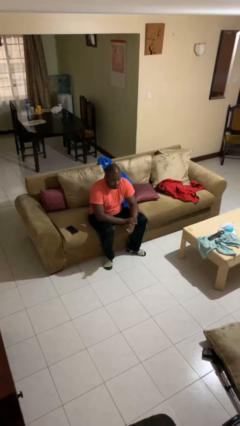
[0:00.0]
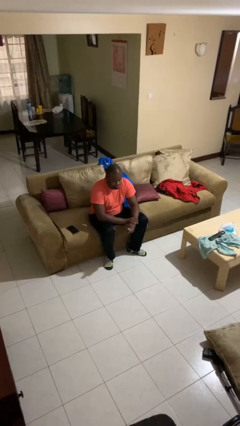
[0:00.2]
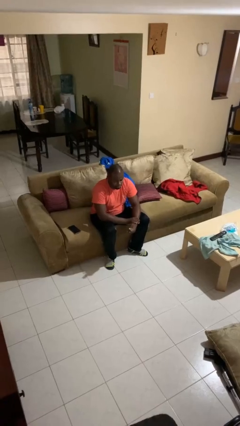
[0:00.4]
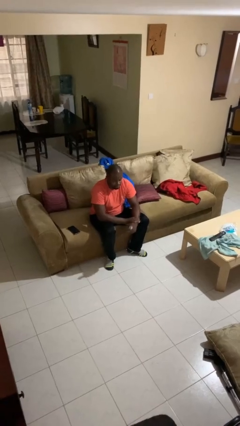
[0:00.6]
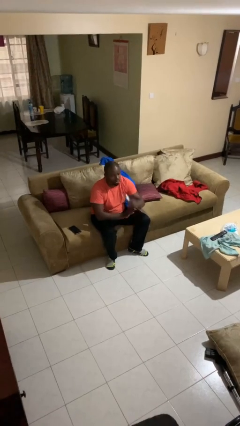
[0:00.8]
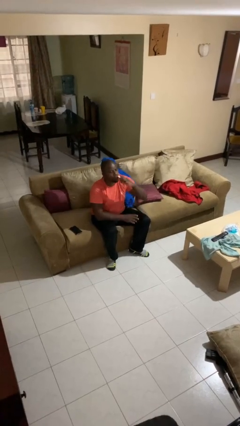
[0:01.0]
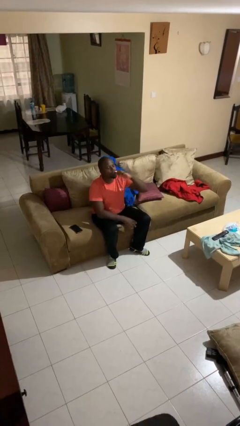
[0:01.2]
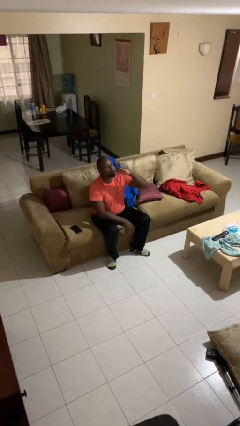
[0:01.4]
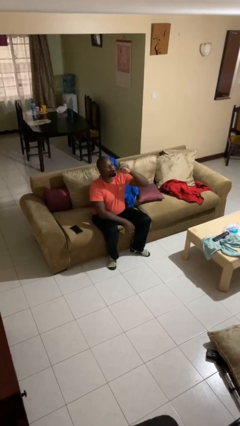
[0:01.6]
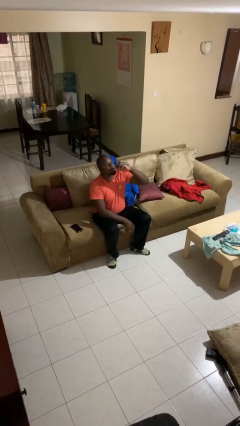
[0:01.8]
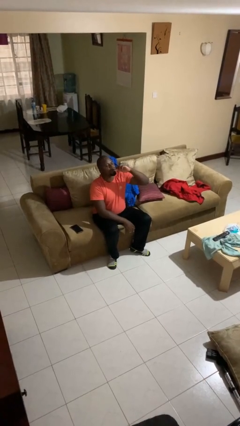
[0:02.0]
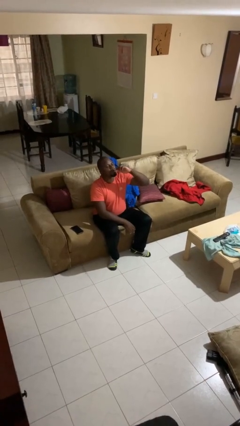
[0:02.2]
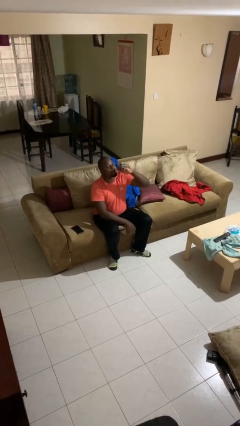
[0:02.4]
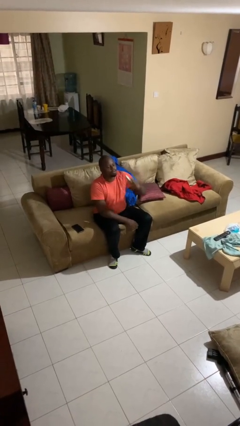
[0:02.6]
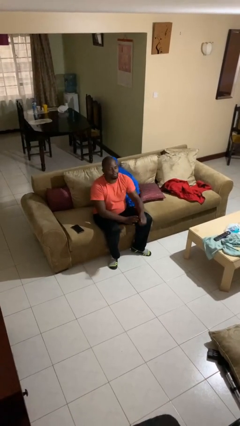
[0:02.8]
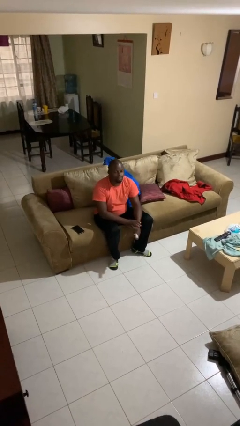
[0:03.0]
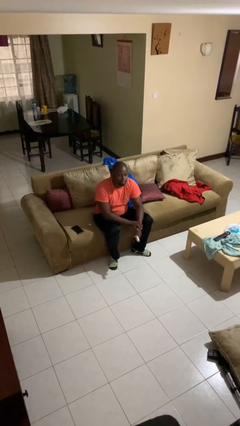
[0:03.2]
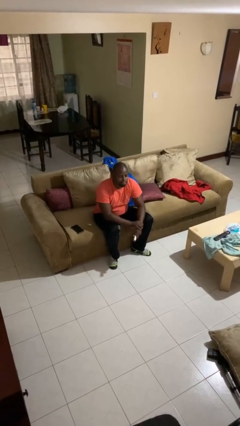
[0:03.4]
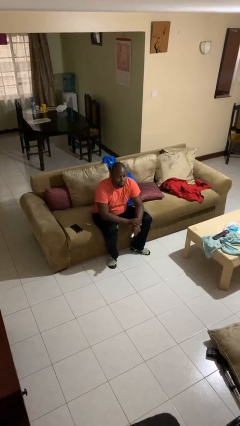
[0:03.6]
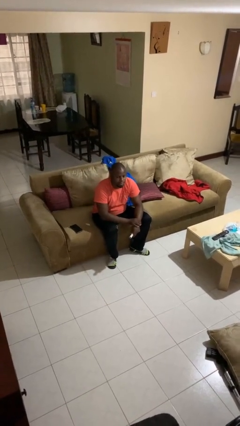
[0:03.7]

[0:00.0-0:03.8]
person vapes

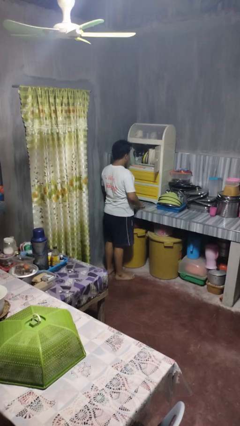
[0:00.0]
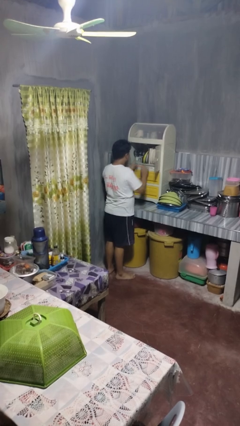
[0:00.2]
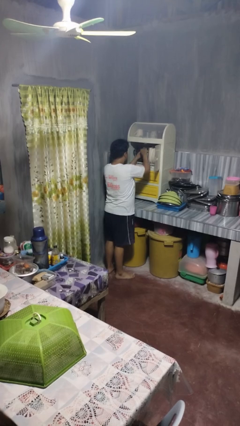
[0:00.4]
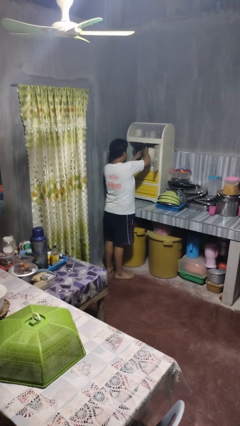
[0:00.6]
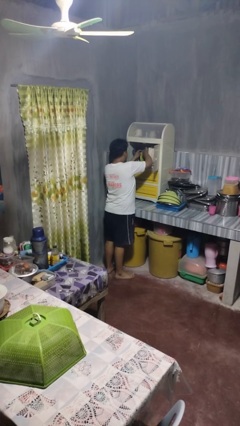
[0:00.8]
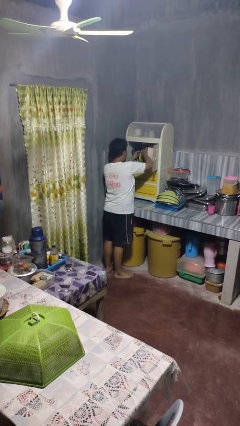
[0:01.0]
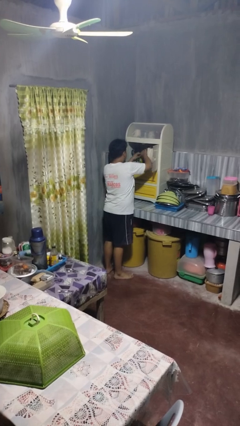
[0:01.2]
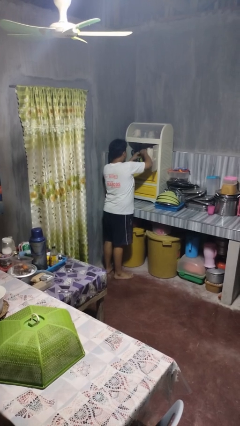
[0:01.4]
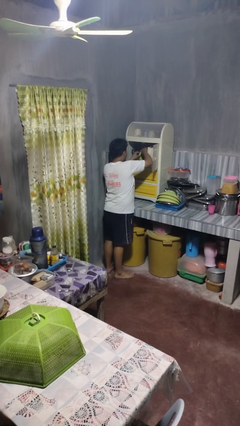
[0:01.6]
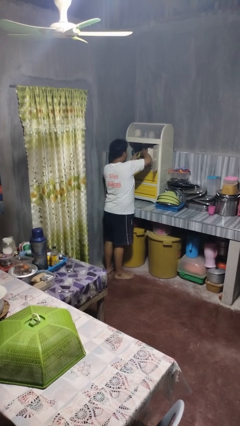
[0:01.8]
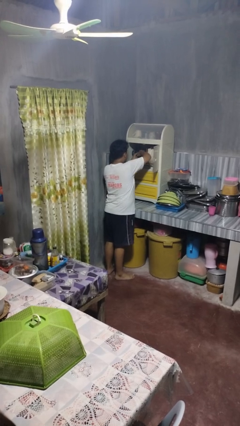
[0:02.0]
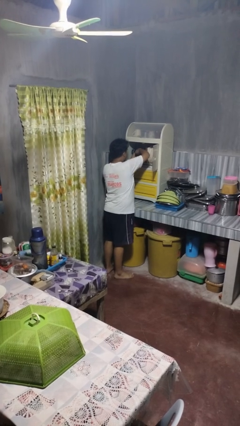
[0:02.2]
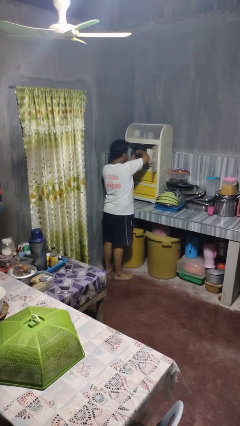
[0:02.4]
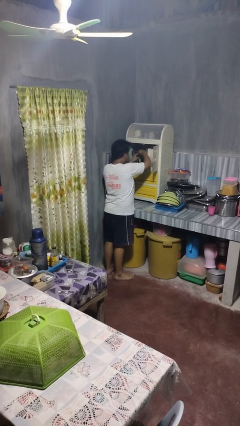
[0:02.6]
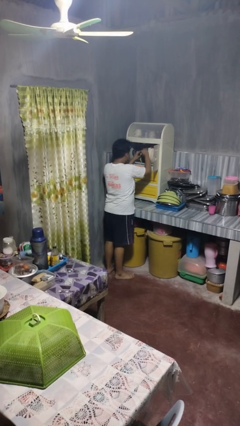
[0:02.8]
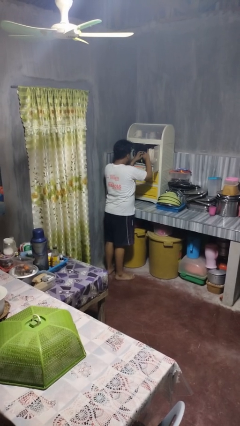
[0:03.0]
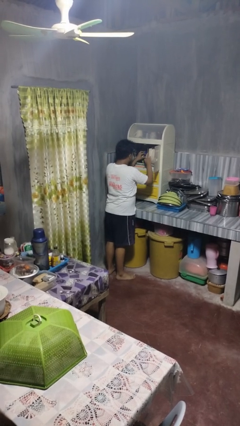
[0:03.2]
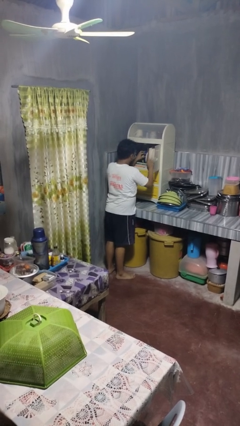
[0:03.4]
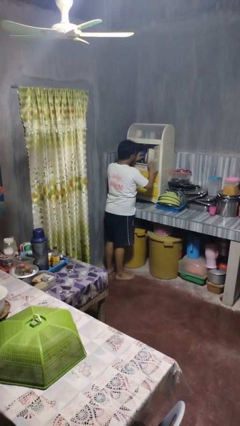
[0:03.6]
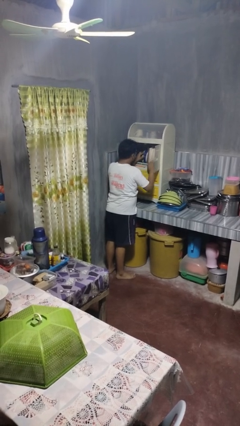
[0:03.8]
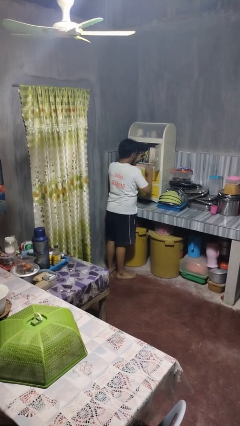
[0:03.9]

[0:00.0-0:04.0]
person searches in cabinet

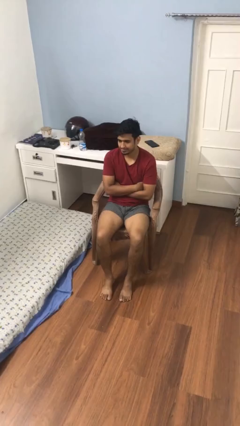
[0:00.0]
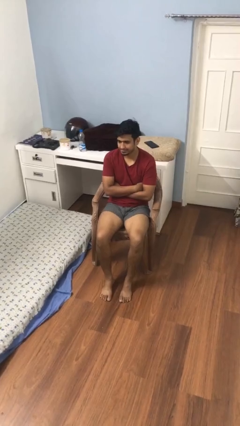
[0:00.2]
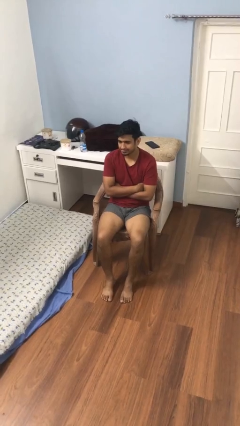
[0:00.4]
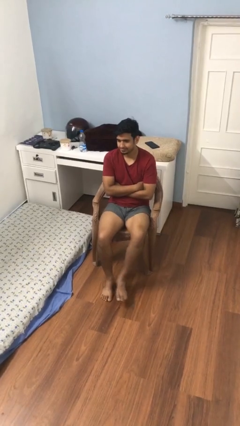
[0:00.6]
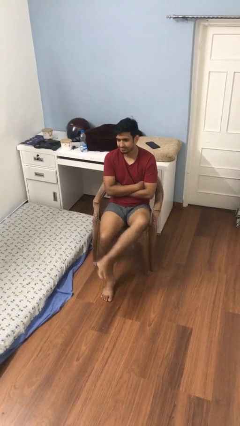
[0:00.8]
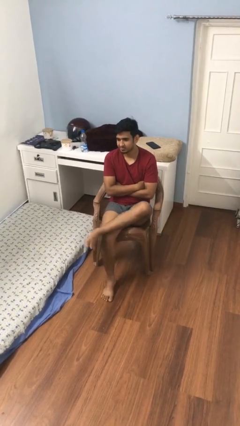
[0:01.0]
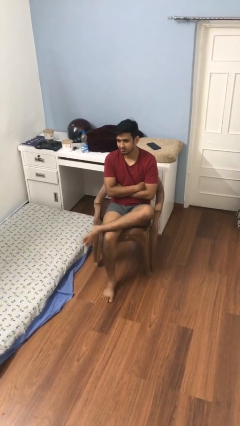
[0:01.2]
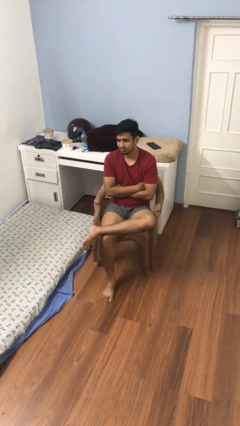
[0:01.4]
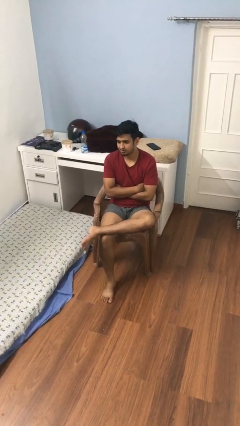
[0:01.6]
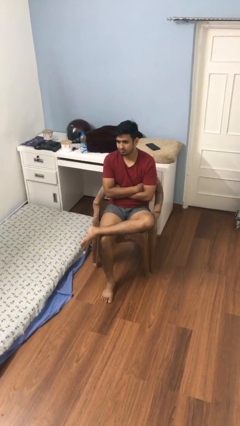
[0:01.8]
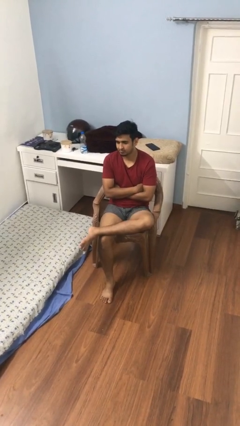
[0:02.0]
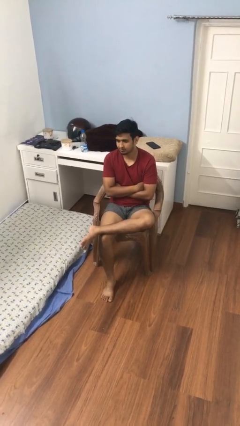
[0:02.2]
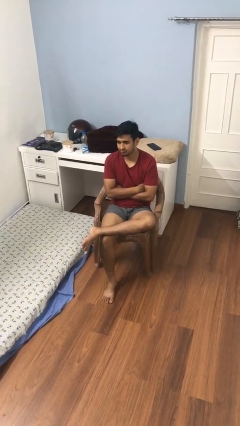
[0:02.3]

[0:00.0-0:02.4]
person crosses legs

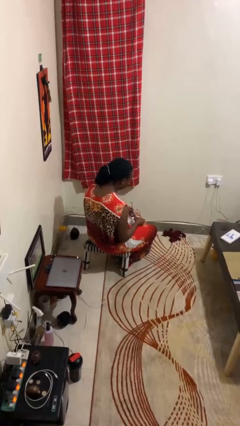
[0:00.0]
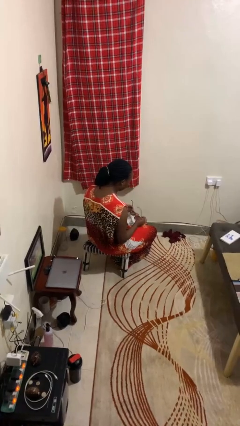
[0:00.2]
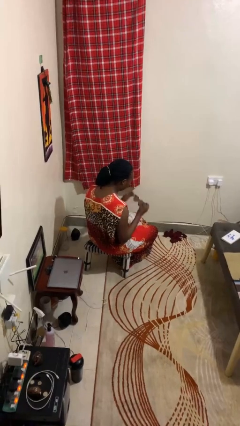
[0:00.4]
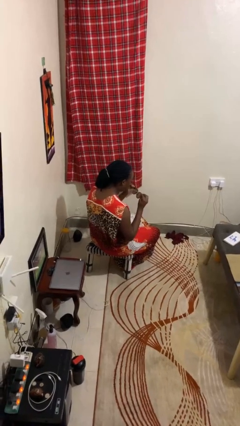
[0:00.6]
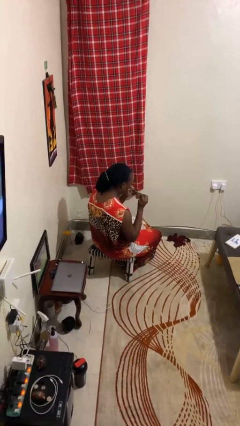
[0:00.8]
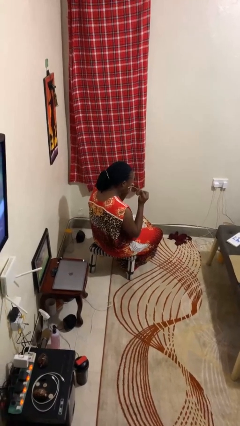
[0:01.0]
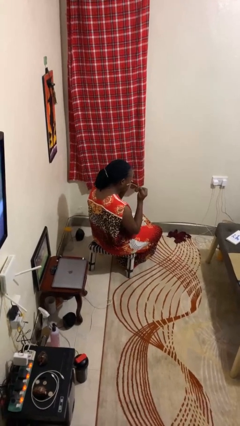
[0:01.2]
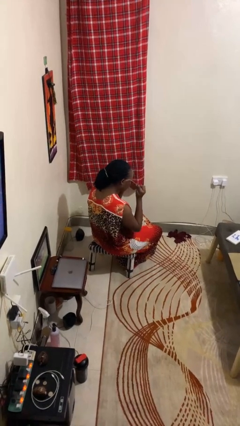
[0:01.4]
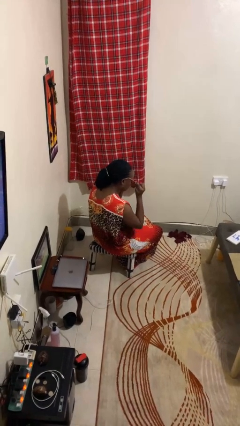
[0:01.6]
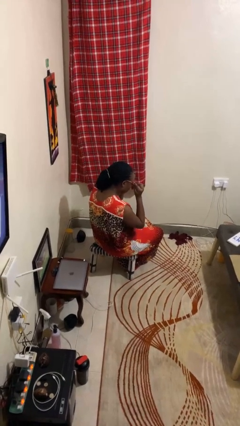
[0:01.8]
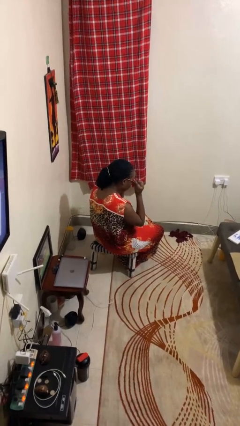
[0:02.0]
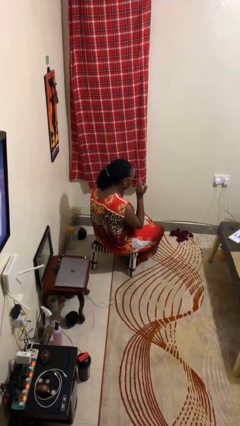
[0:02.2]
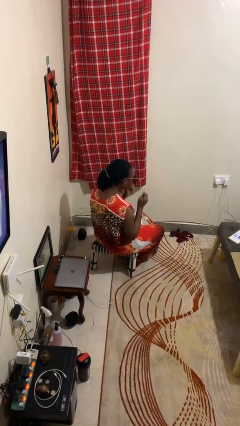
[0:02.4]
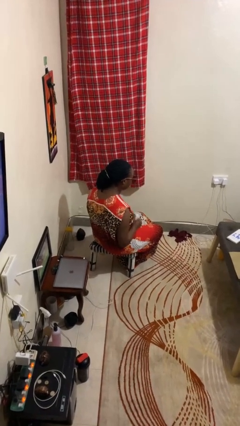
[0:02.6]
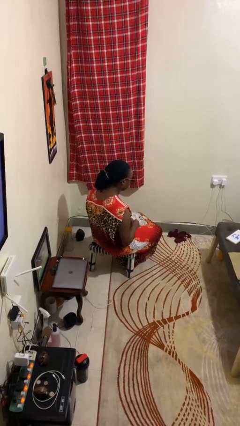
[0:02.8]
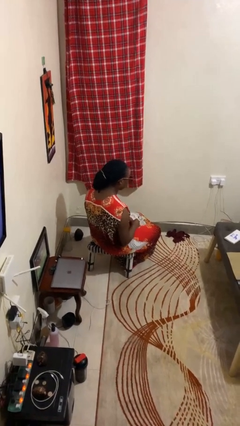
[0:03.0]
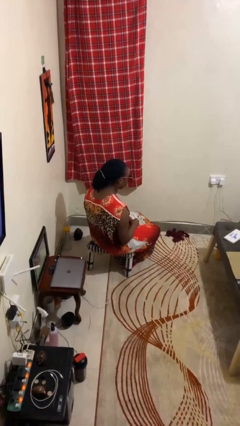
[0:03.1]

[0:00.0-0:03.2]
person puts on sunglasses

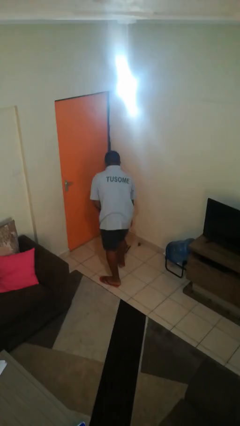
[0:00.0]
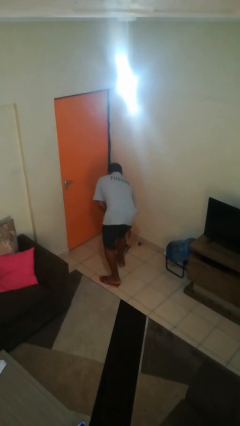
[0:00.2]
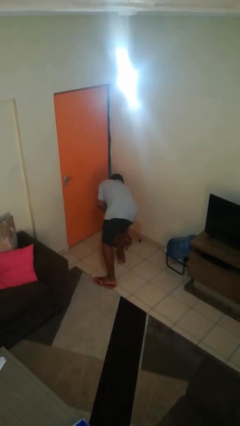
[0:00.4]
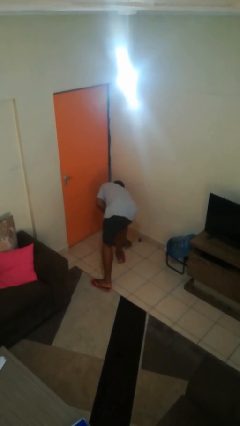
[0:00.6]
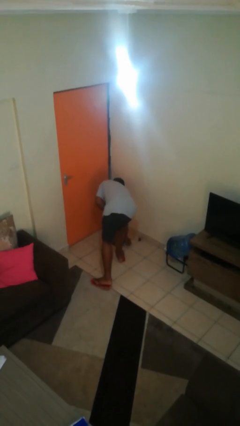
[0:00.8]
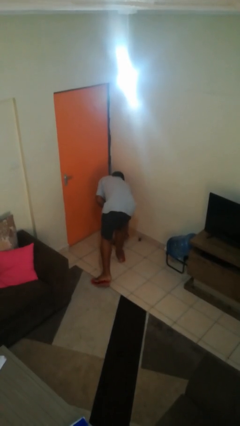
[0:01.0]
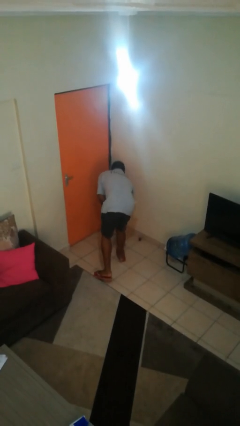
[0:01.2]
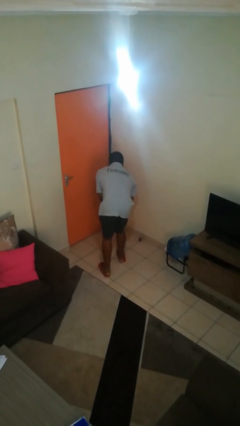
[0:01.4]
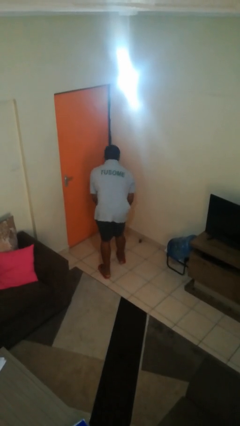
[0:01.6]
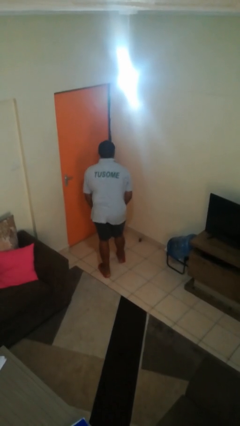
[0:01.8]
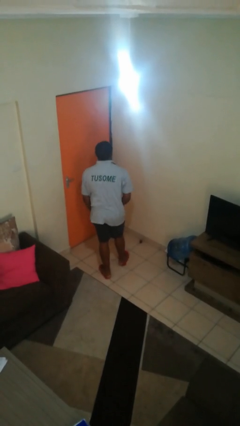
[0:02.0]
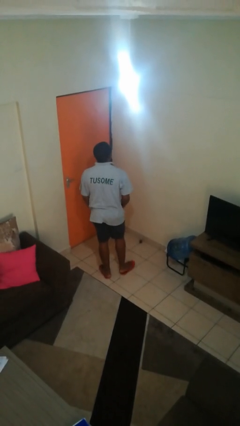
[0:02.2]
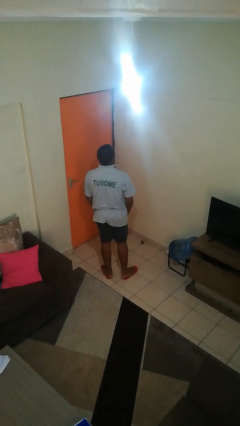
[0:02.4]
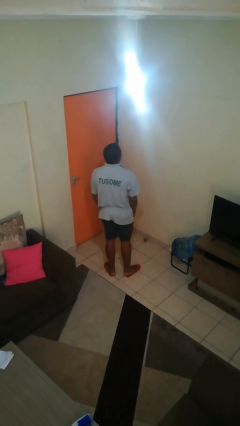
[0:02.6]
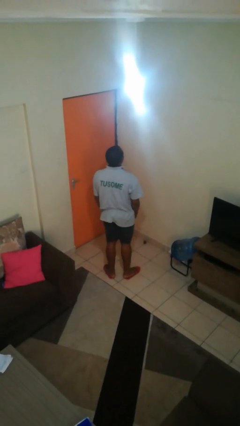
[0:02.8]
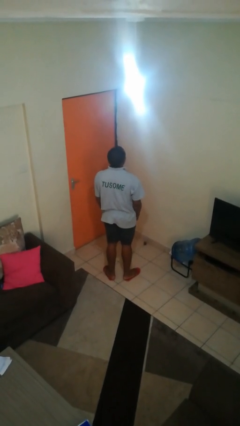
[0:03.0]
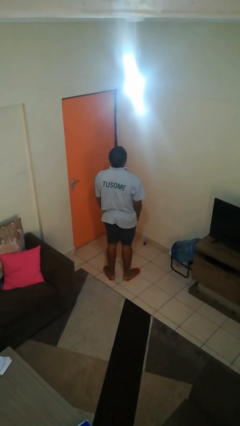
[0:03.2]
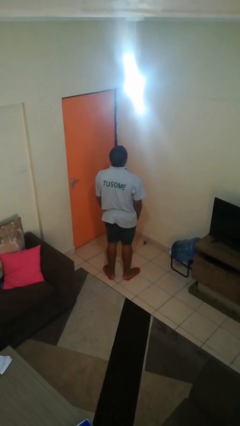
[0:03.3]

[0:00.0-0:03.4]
person picks up object from floor

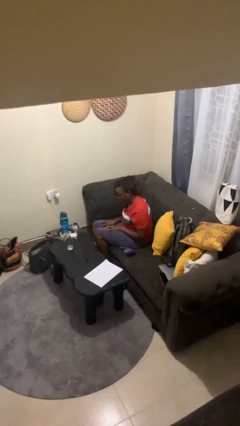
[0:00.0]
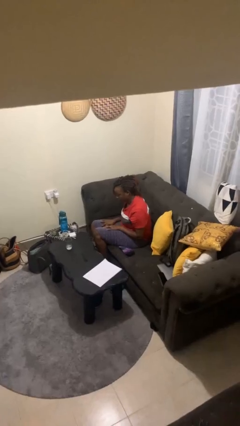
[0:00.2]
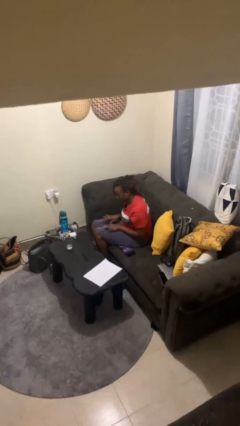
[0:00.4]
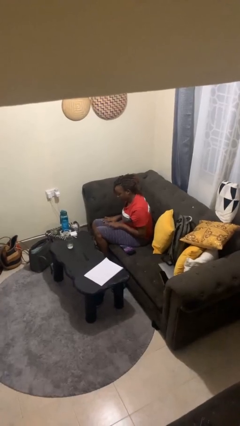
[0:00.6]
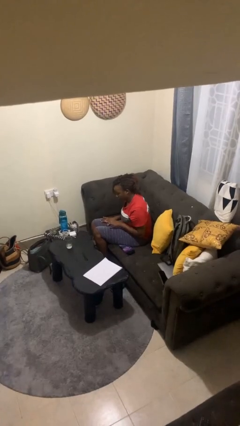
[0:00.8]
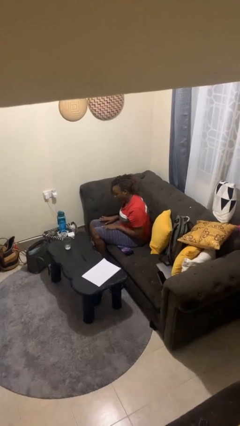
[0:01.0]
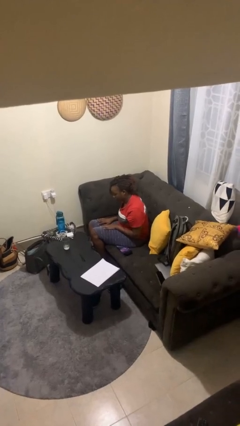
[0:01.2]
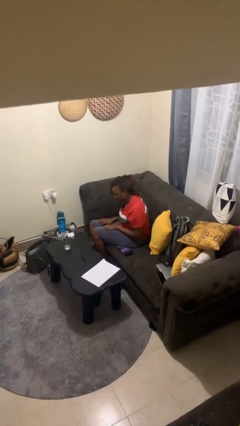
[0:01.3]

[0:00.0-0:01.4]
person slaps hands on thighs
